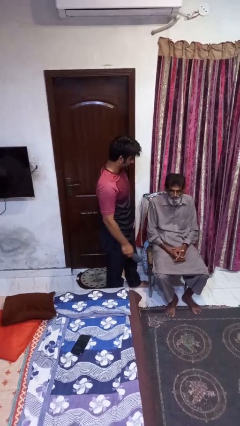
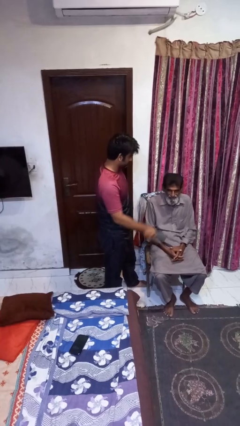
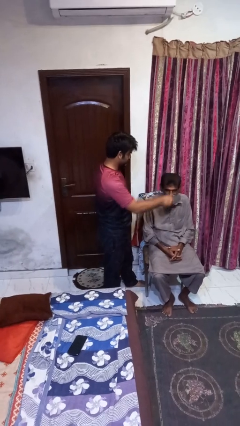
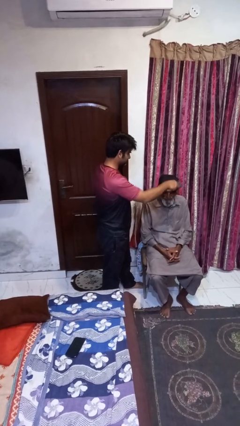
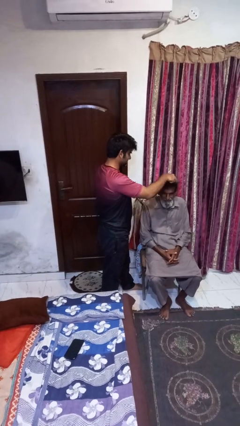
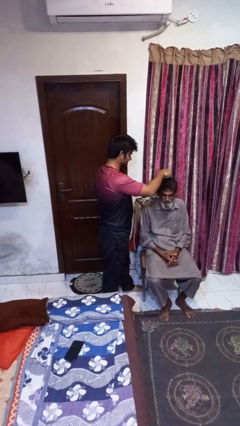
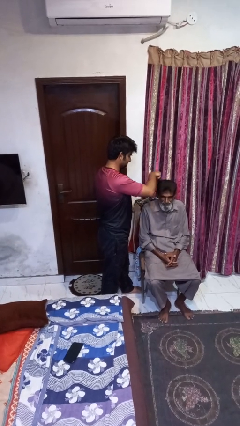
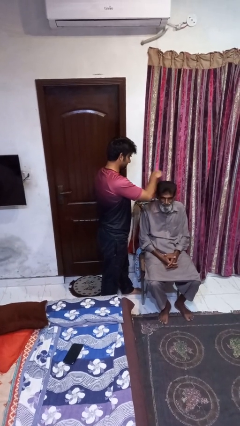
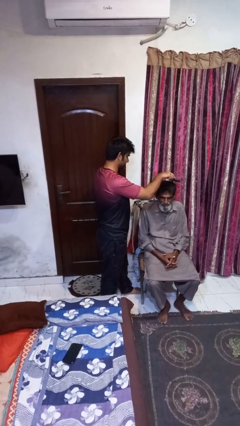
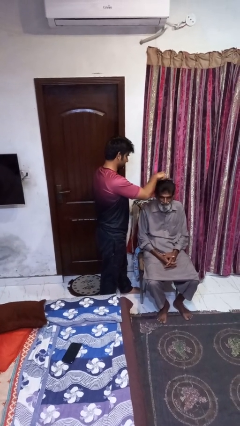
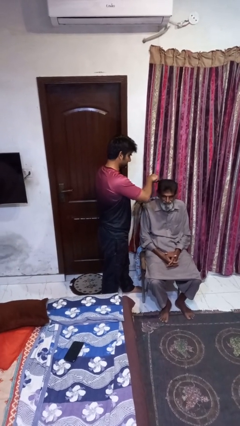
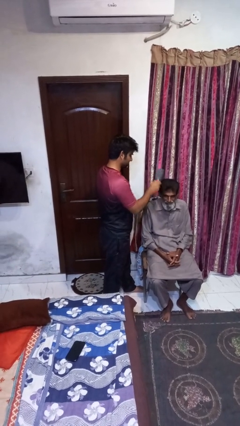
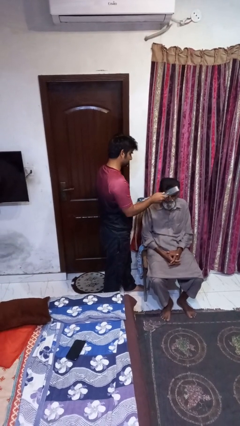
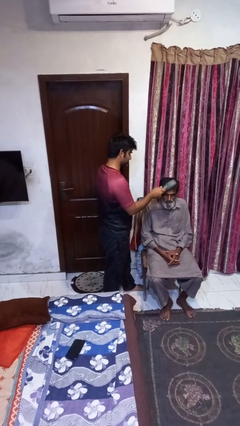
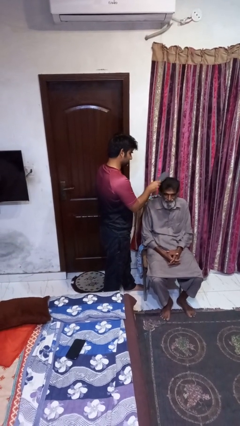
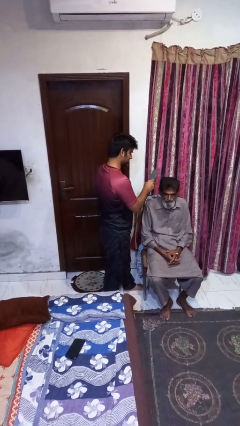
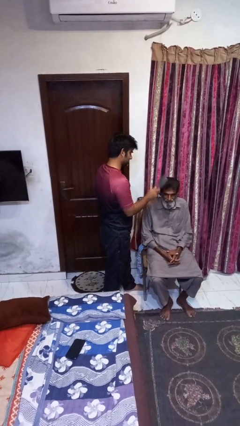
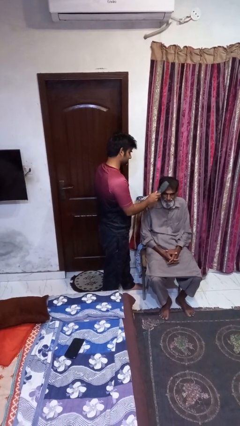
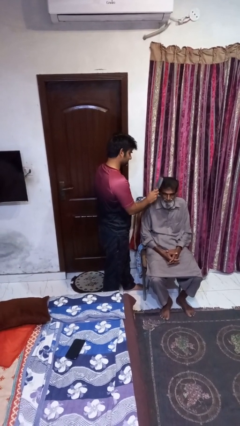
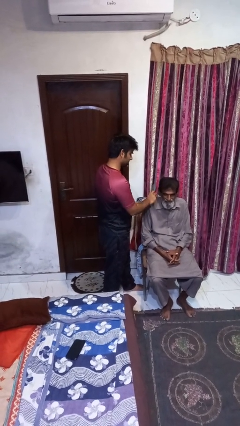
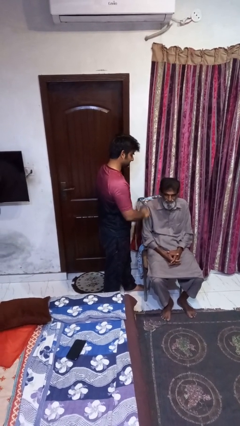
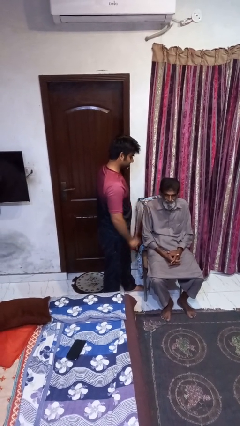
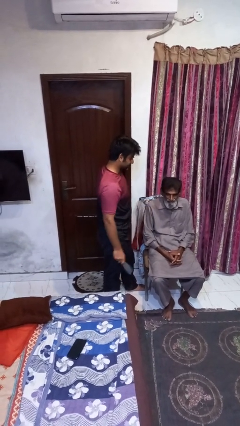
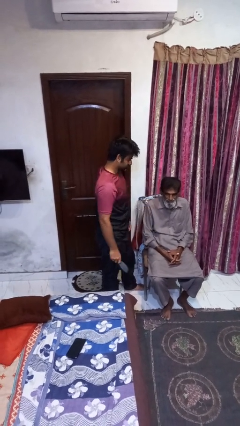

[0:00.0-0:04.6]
person brushes hair of person

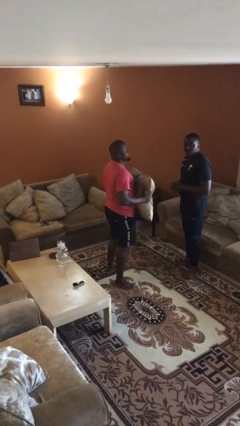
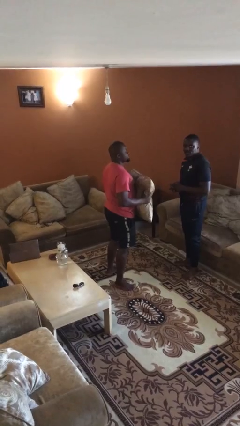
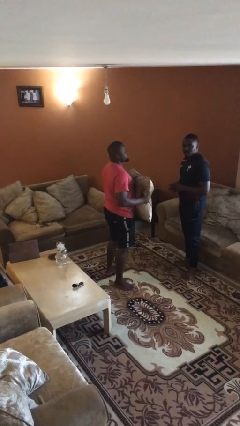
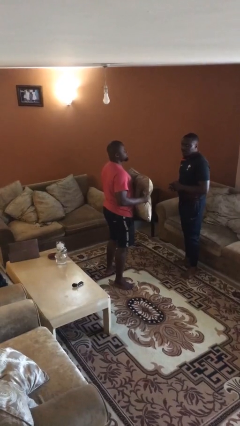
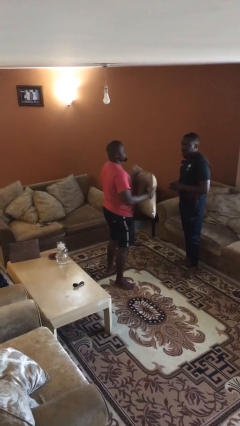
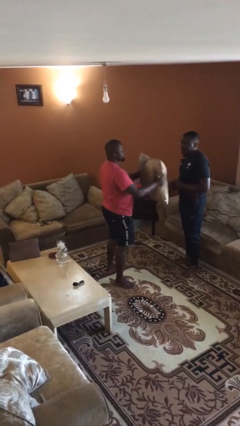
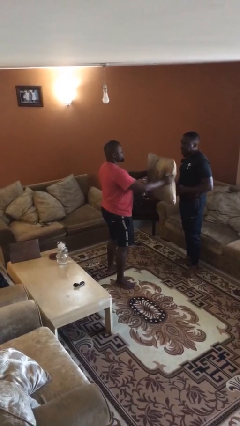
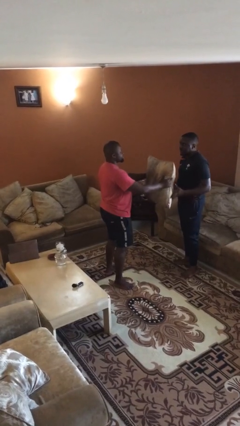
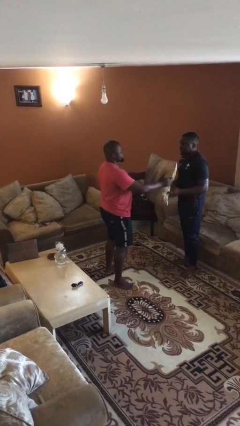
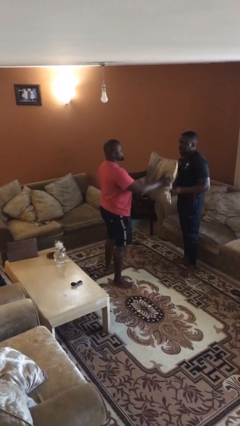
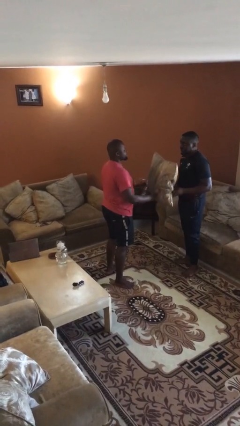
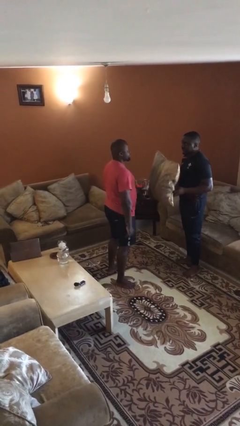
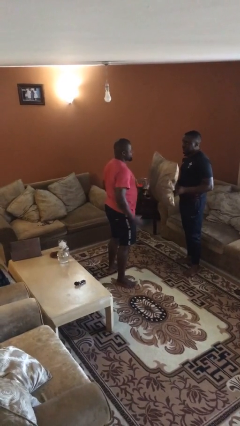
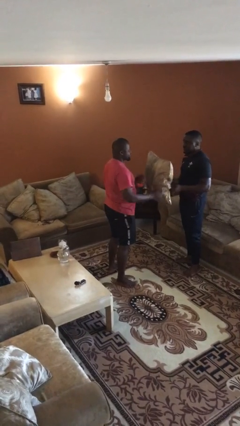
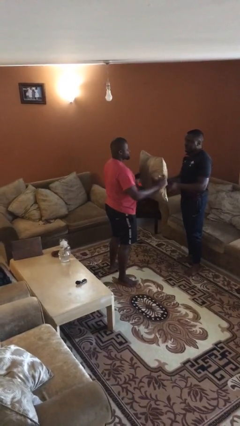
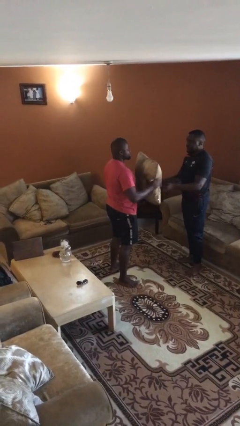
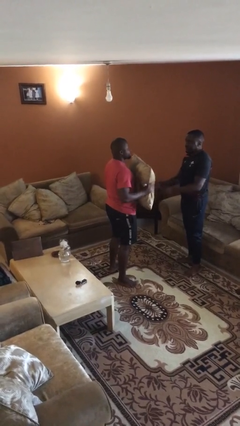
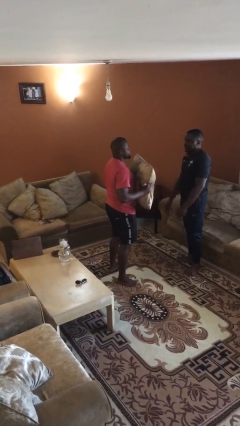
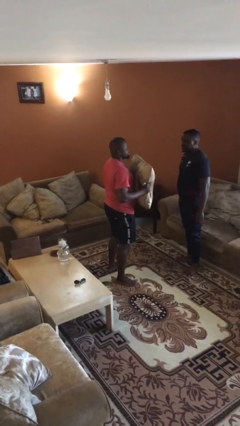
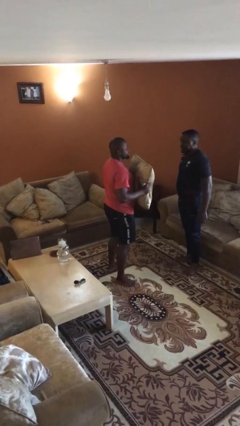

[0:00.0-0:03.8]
person transfers object to person

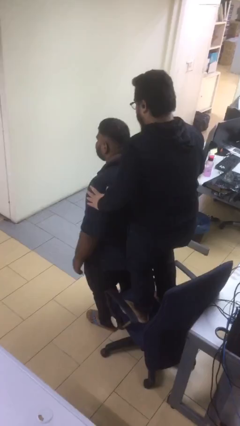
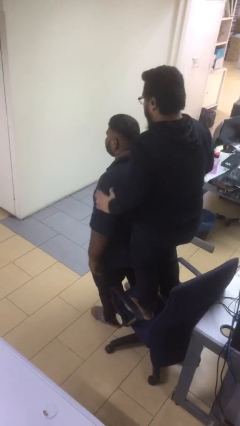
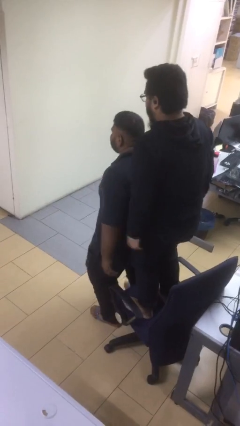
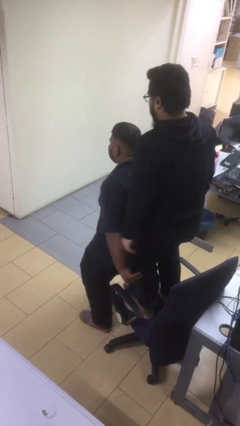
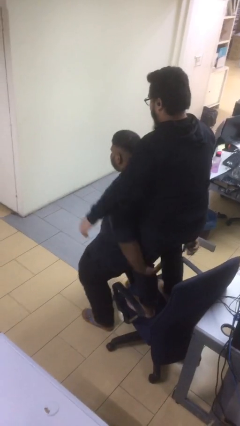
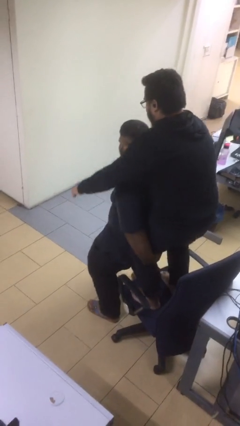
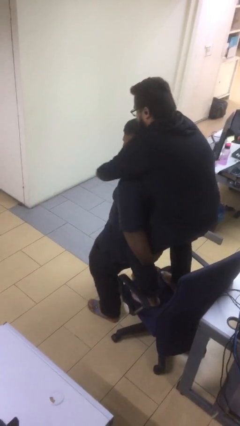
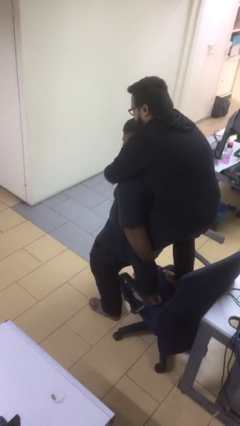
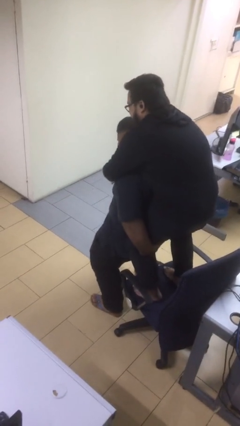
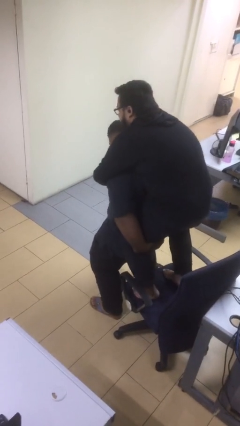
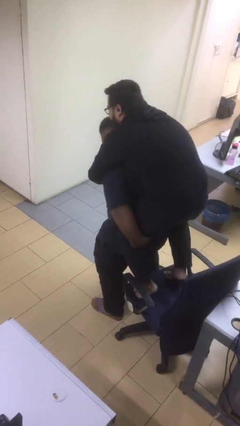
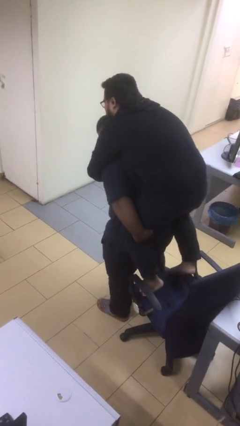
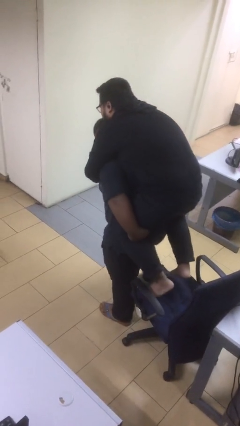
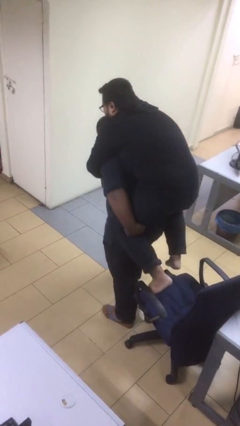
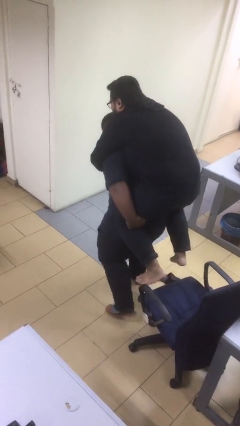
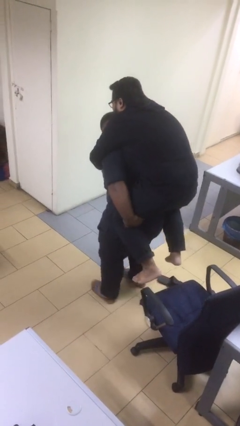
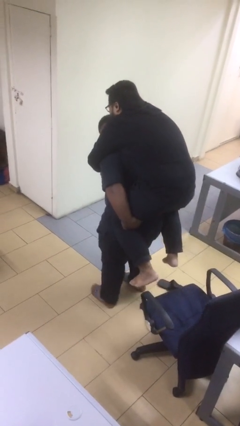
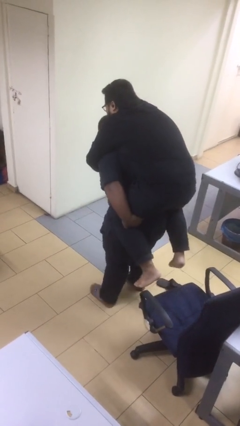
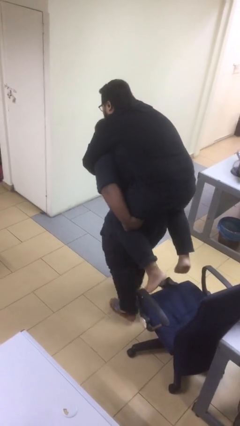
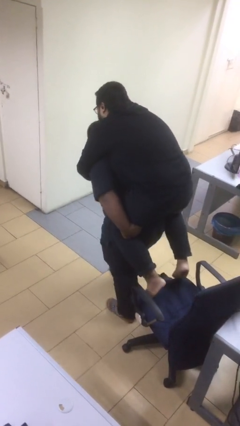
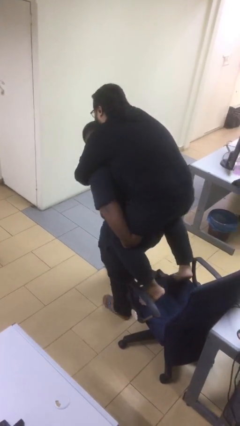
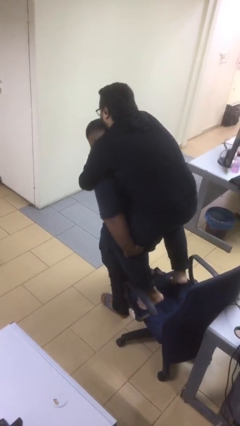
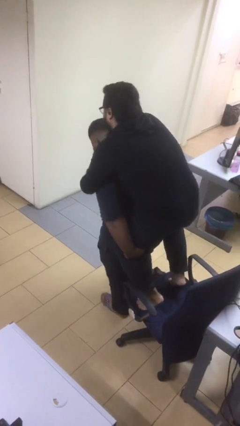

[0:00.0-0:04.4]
person carries person on back

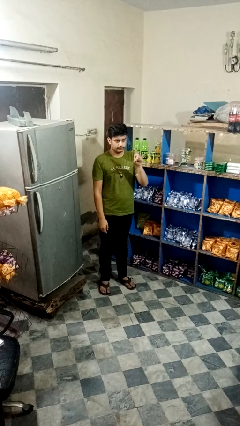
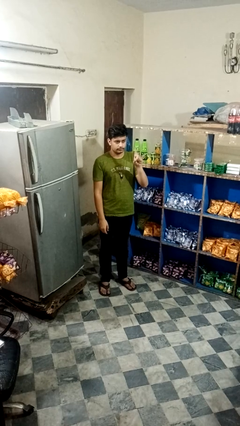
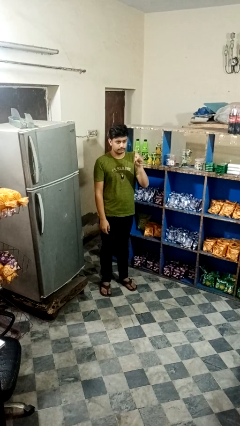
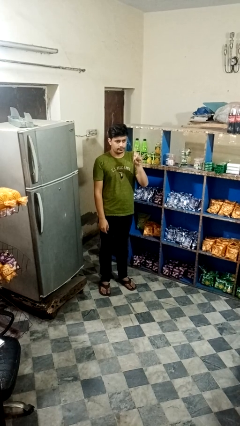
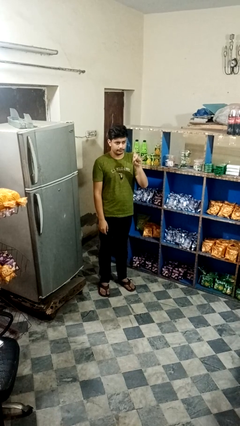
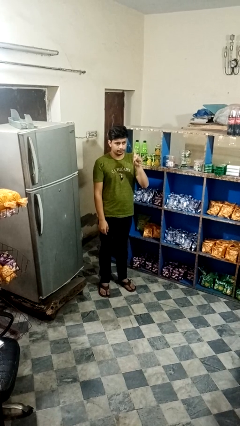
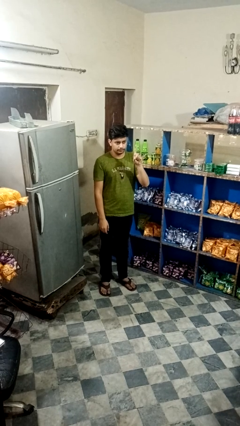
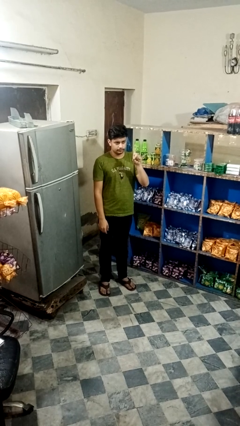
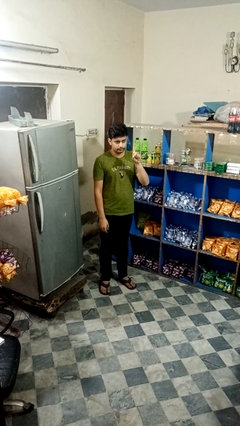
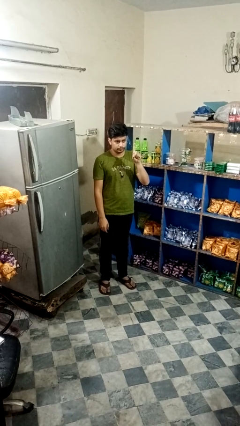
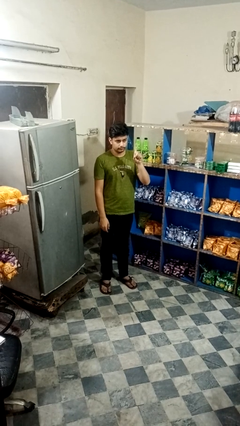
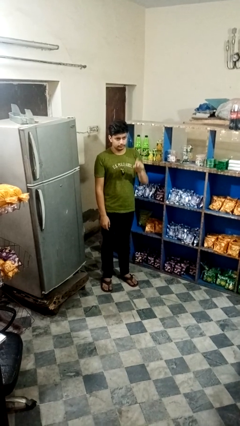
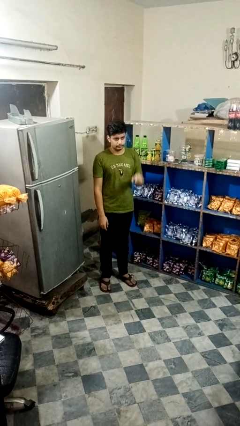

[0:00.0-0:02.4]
person gestures number one

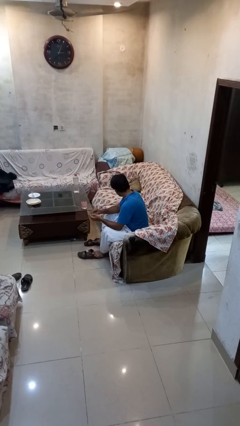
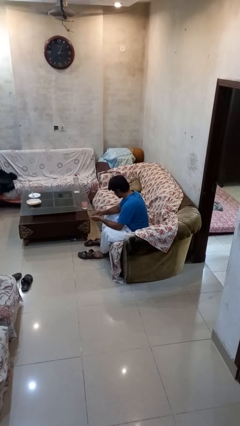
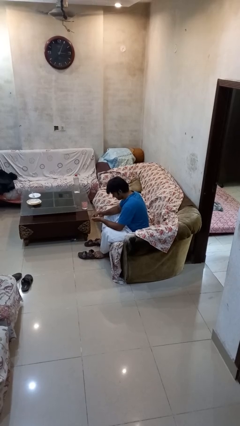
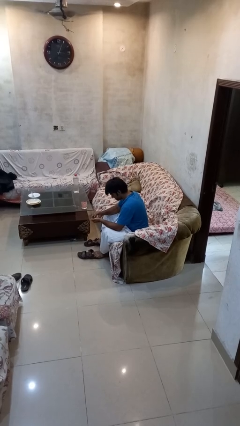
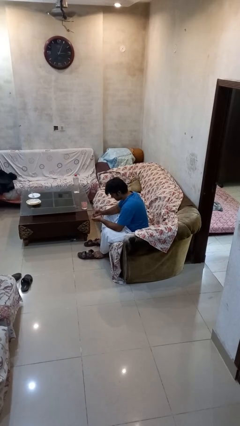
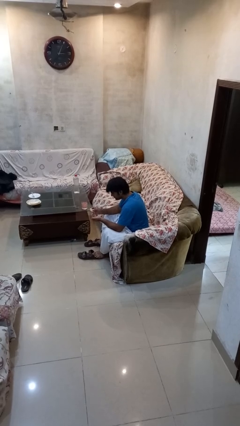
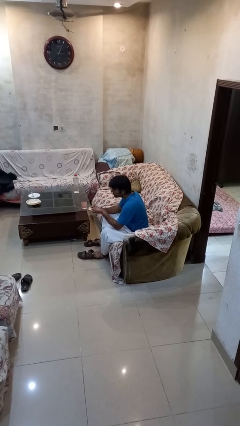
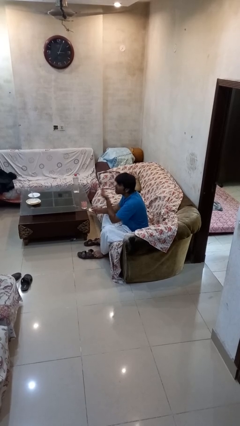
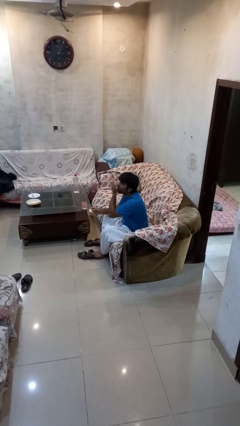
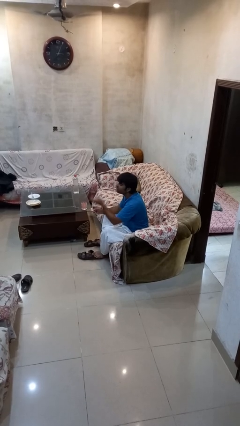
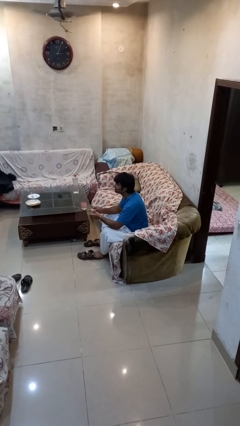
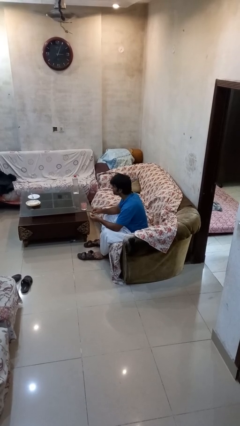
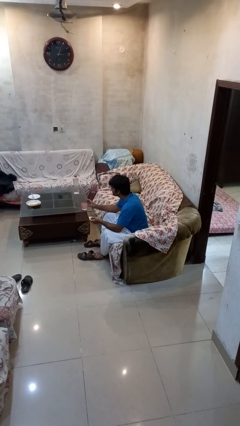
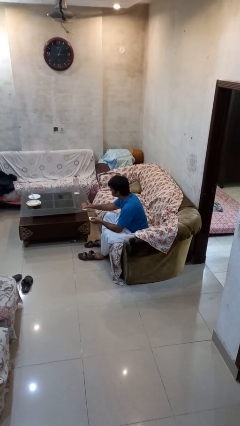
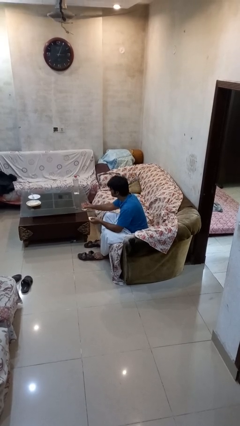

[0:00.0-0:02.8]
person takes medicine pills
